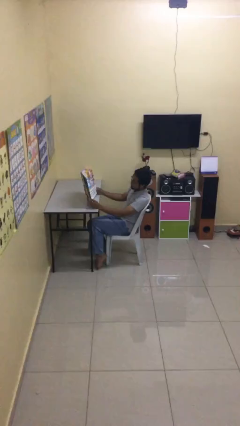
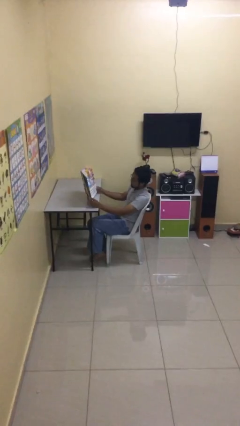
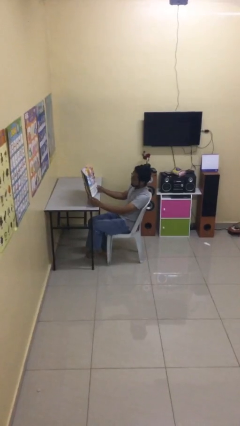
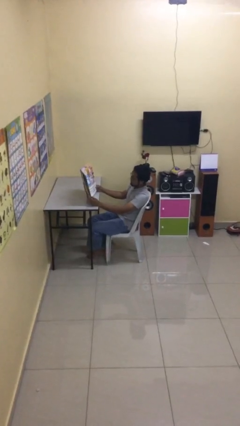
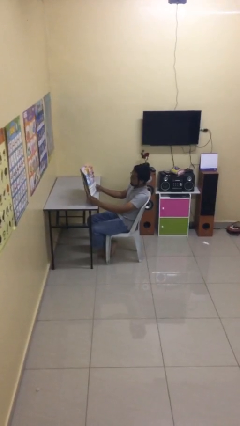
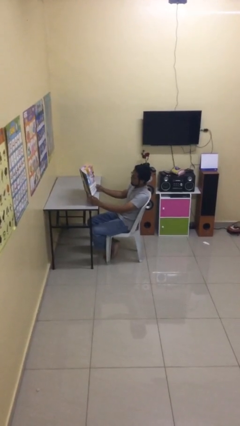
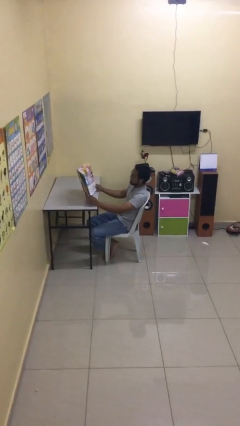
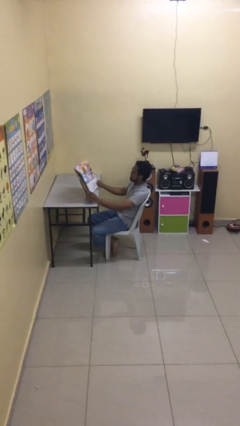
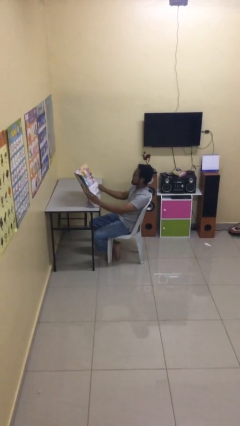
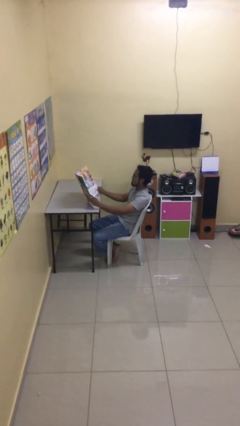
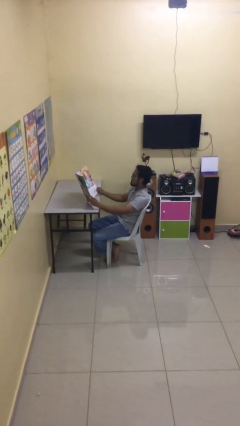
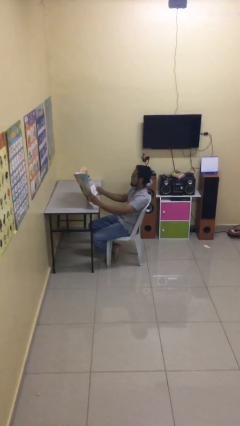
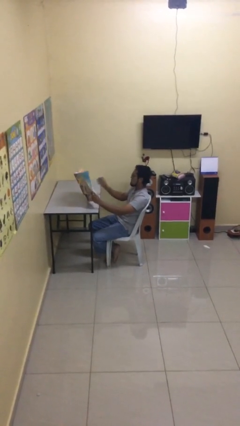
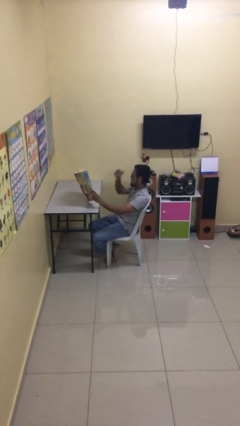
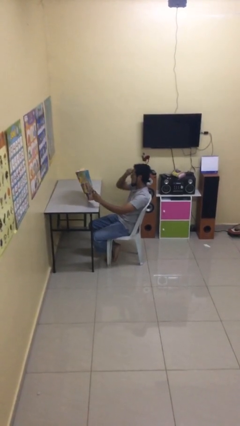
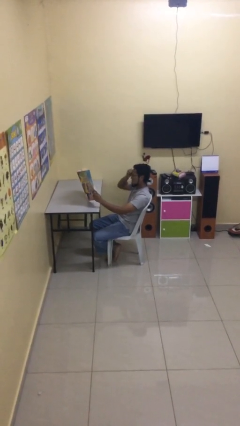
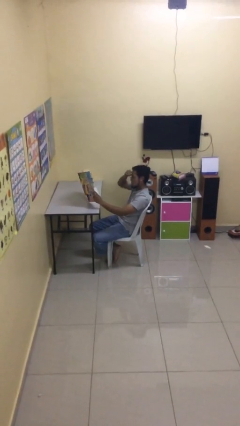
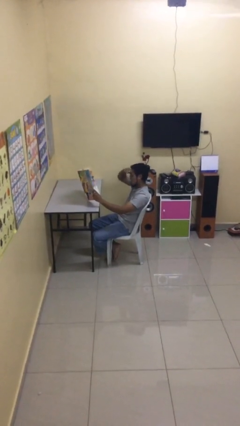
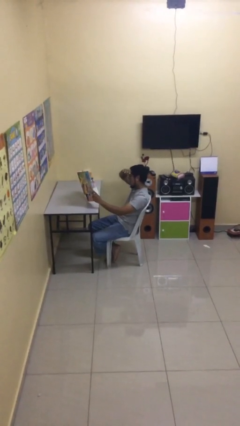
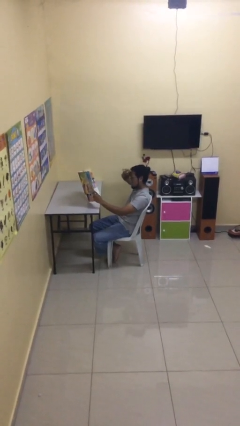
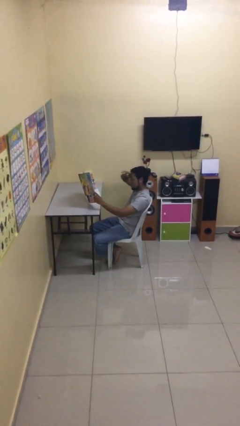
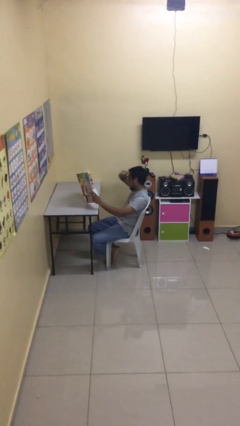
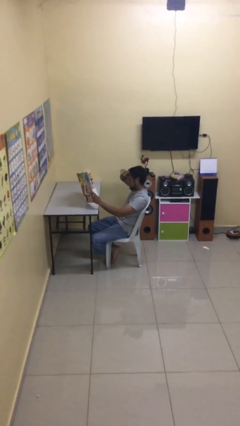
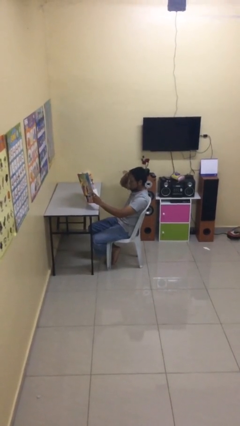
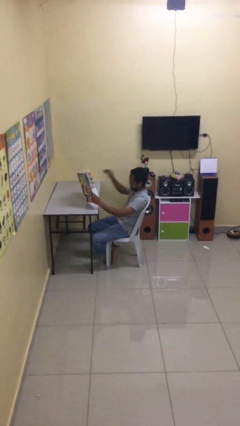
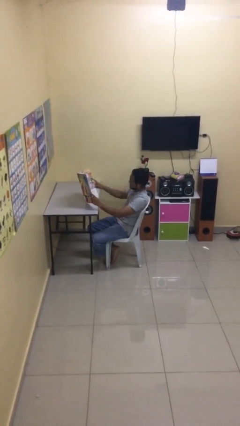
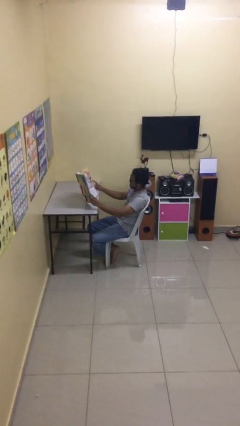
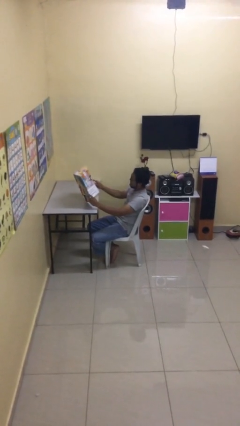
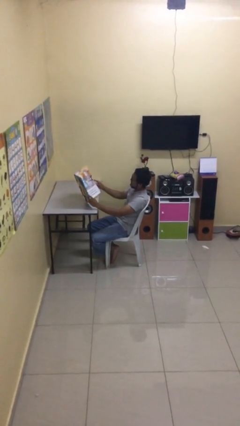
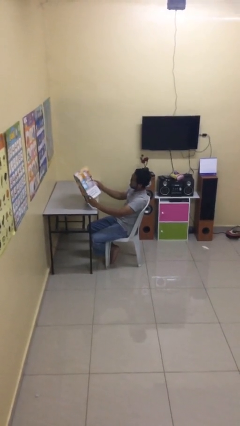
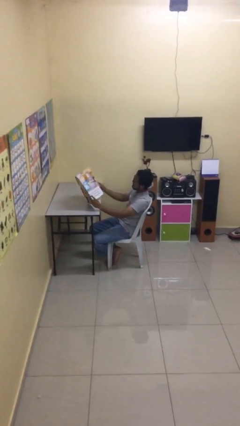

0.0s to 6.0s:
person reads document

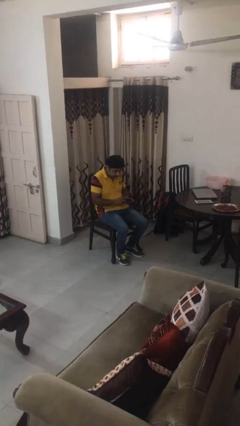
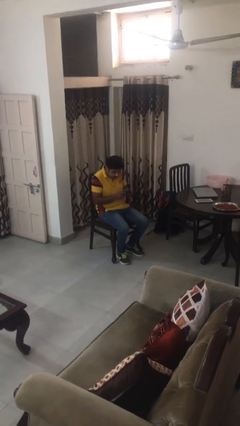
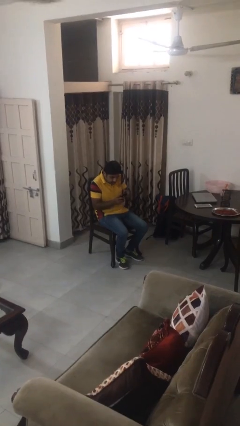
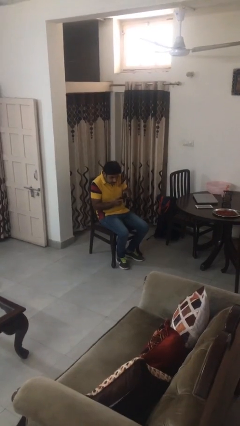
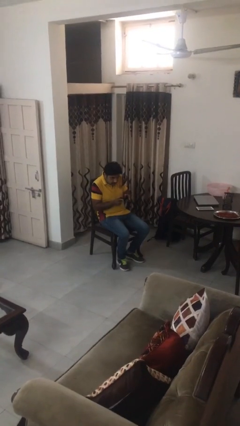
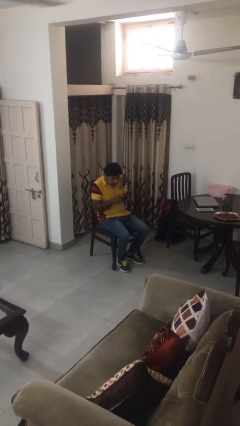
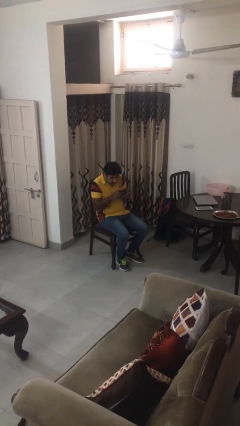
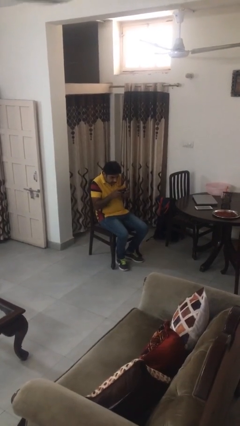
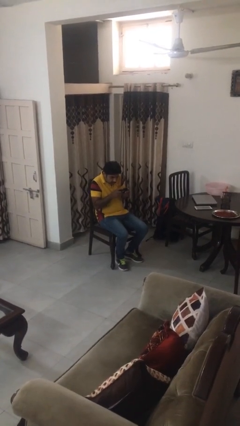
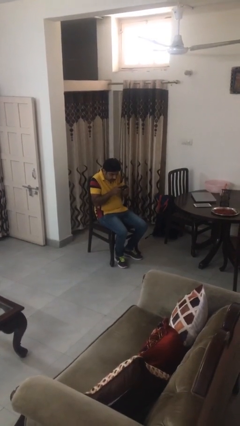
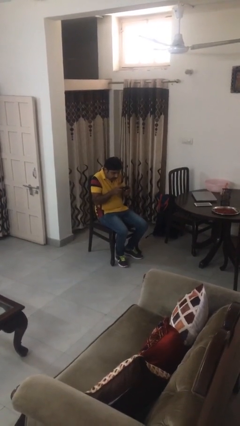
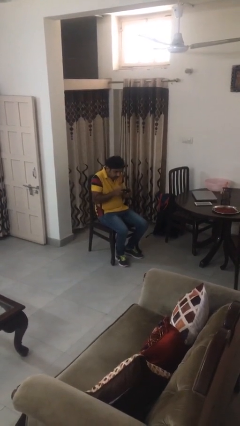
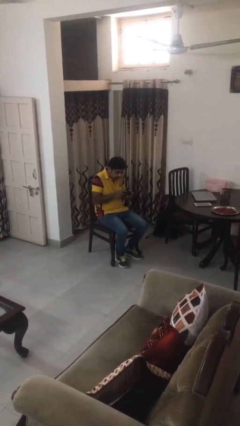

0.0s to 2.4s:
person interacts with handheld game

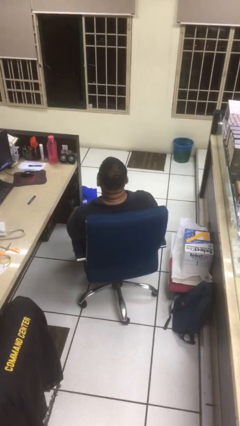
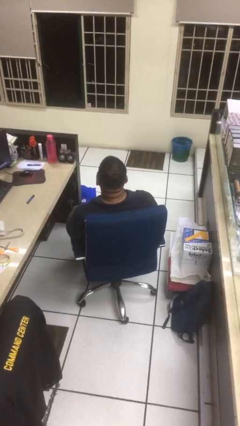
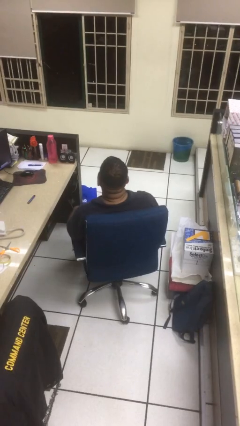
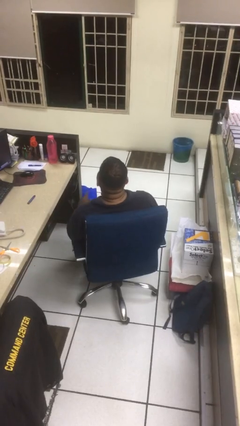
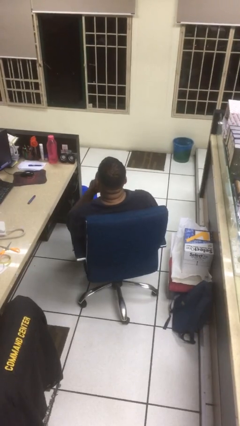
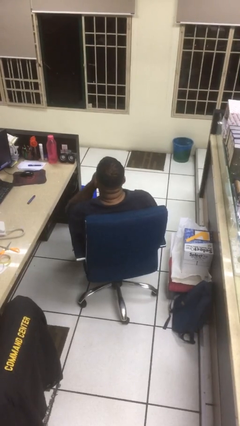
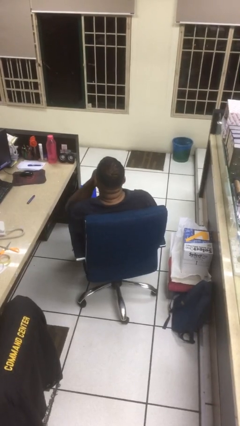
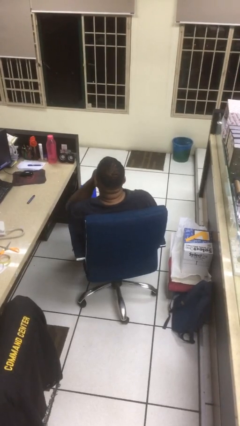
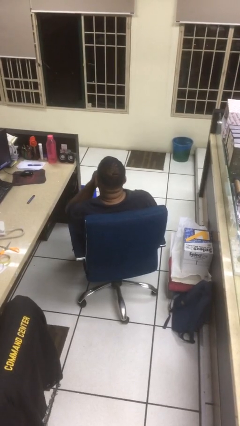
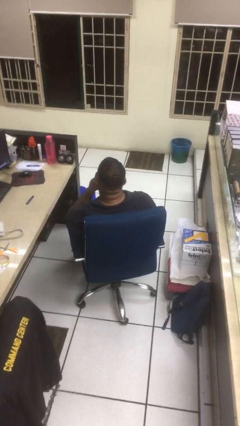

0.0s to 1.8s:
person gestures be quiet

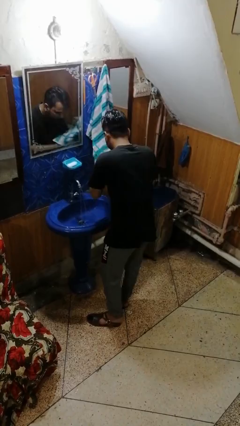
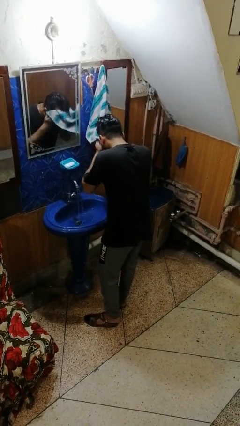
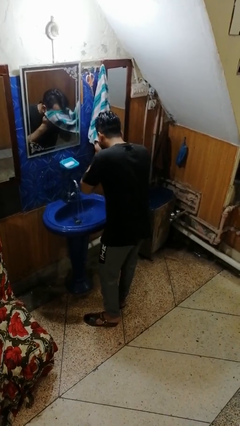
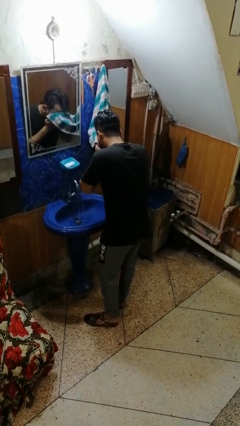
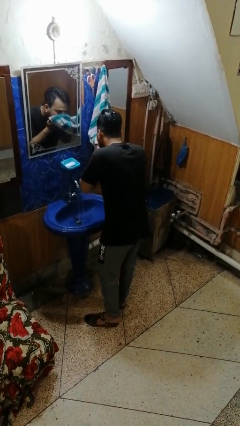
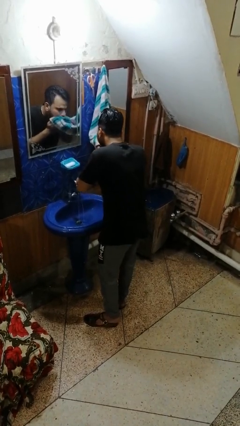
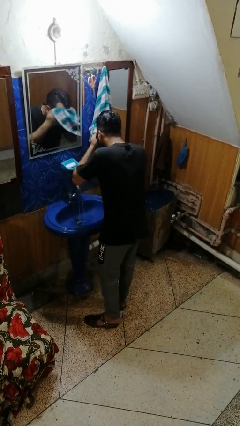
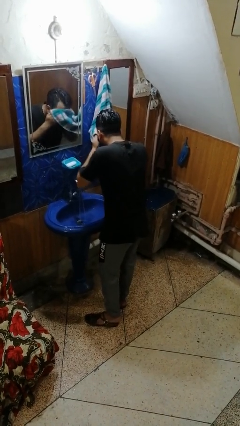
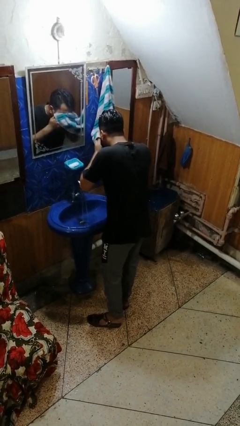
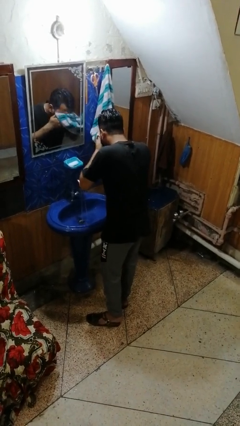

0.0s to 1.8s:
person dries face with towel

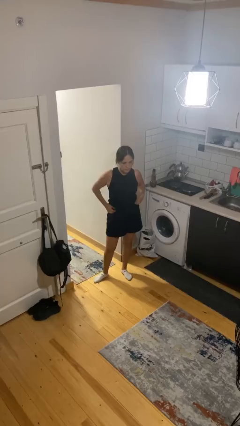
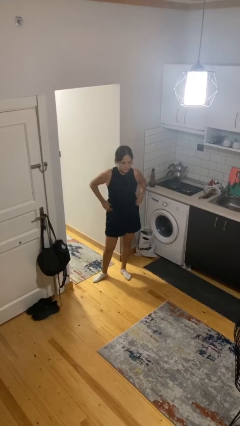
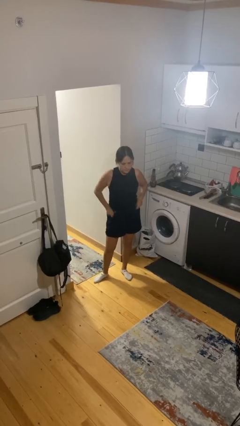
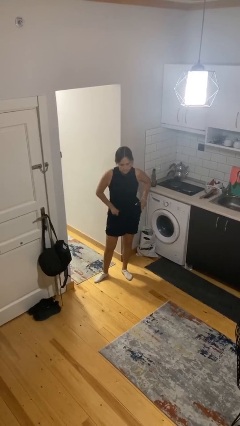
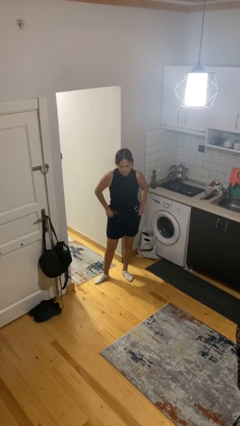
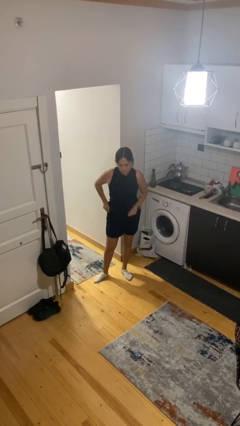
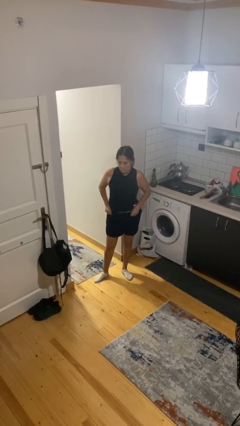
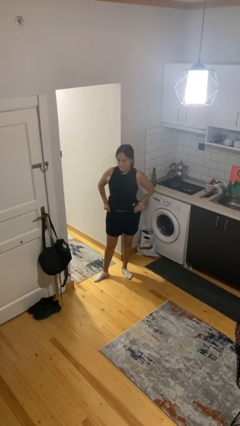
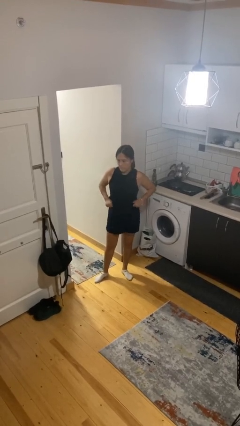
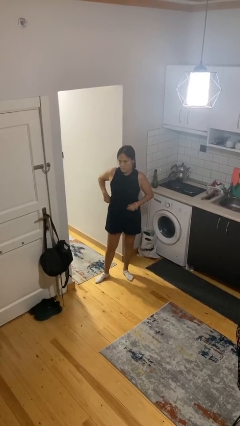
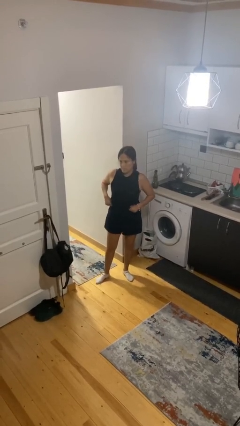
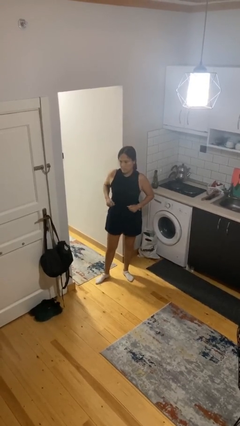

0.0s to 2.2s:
person hikes up pants

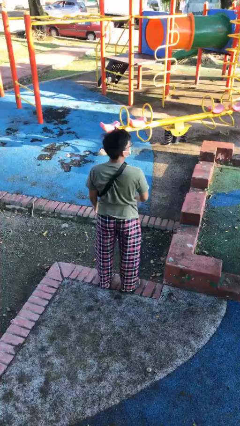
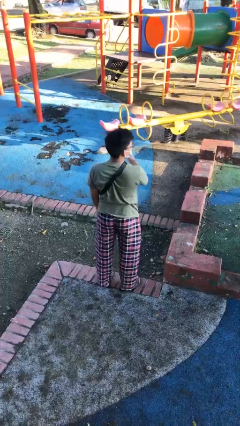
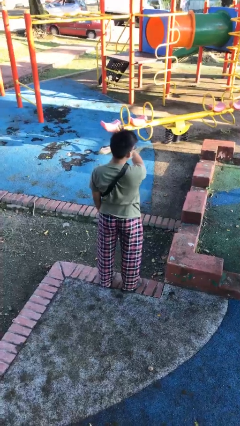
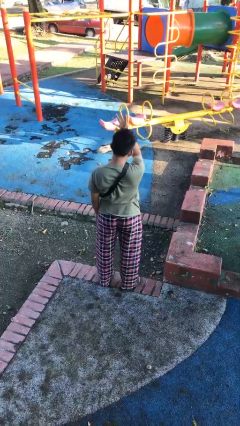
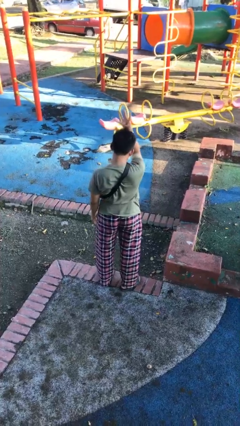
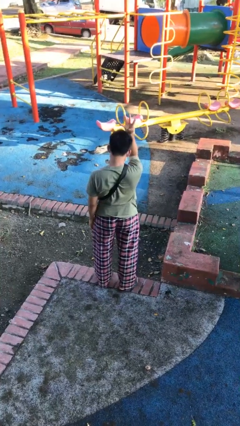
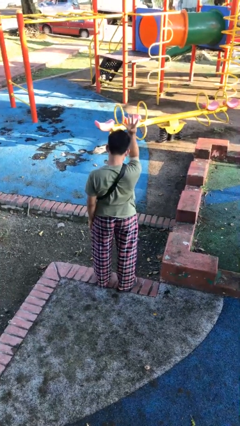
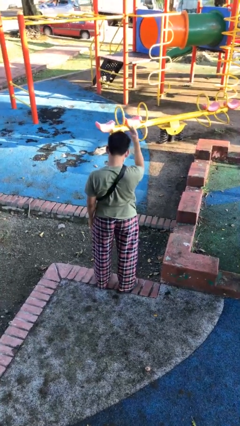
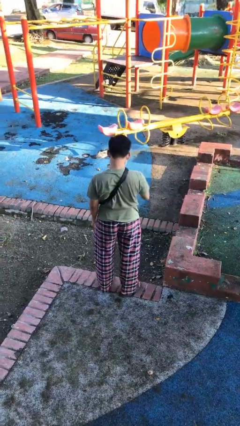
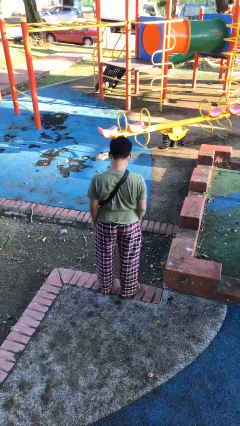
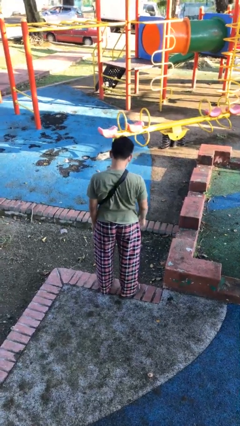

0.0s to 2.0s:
person gestures number four

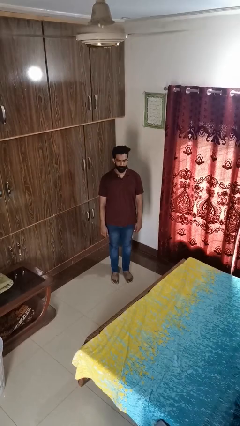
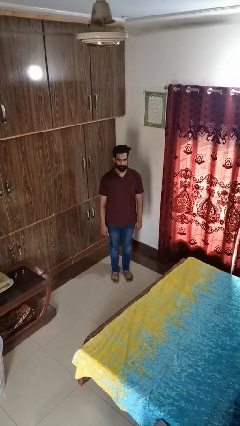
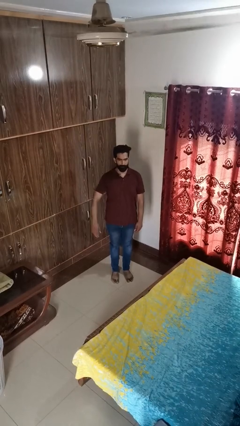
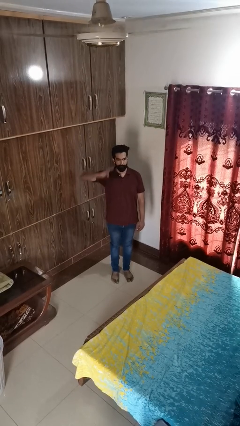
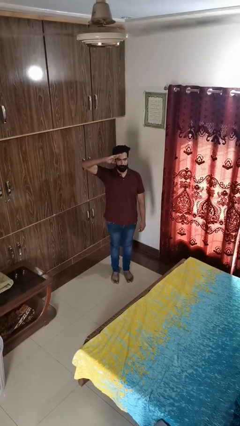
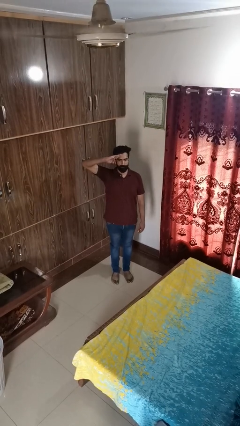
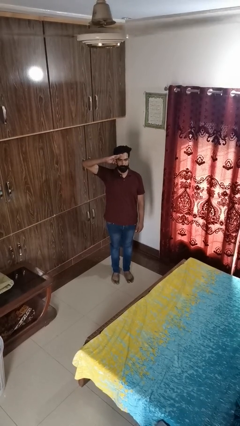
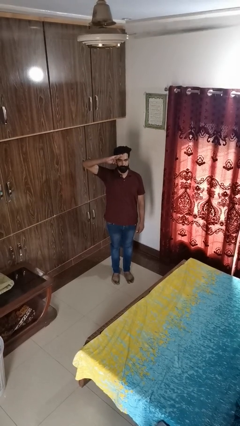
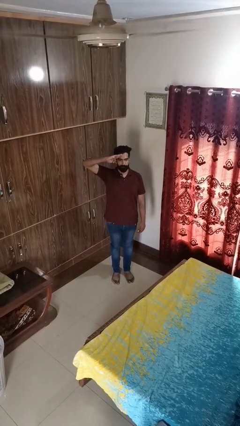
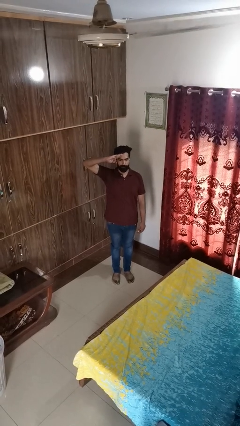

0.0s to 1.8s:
person salutes
